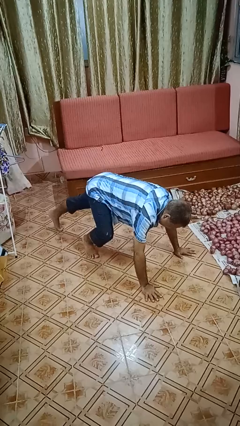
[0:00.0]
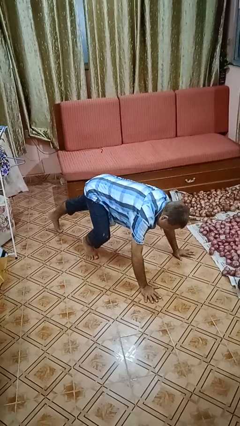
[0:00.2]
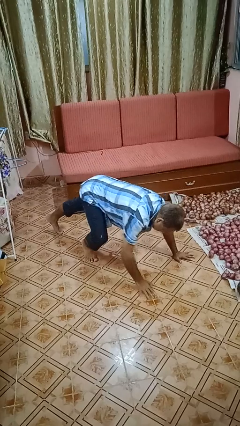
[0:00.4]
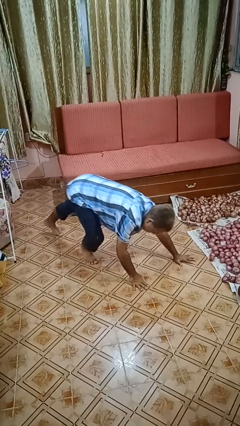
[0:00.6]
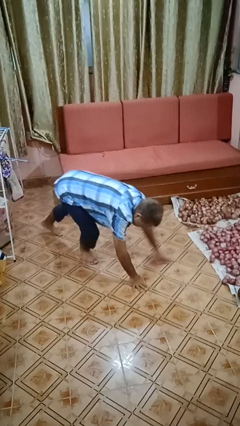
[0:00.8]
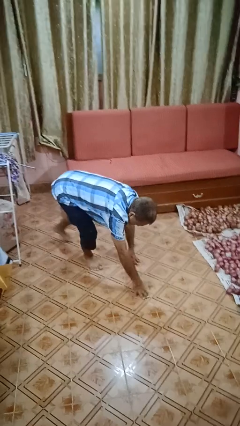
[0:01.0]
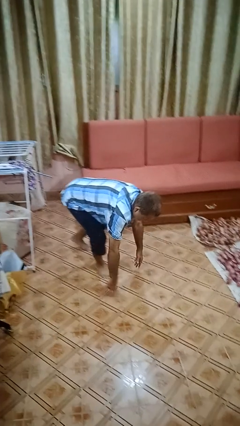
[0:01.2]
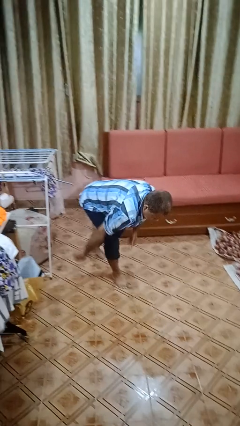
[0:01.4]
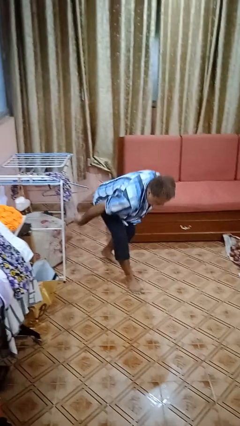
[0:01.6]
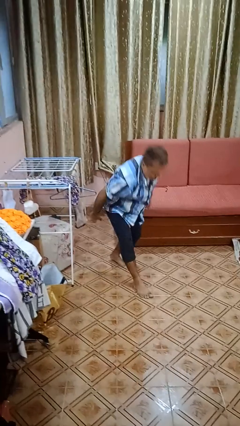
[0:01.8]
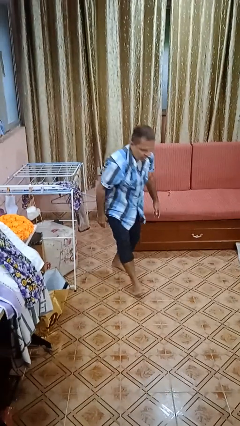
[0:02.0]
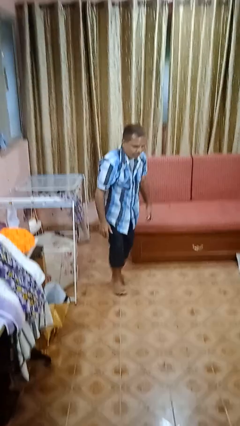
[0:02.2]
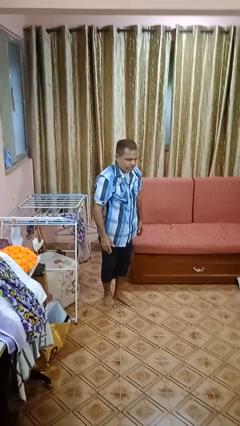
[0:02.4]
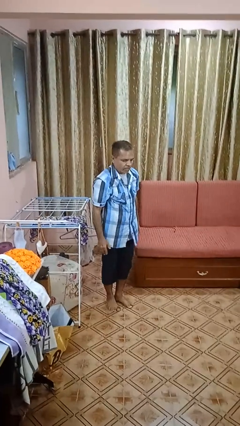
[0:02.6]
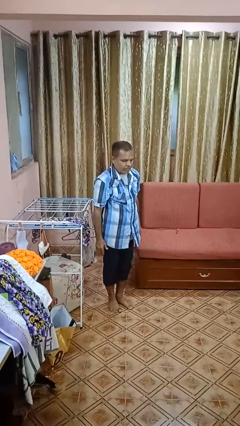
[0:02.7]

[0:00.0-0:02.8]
person stands up from floor

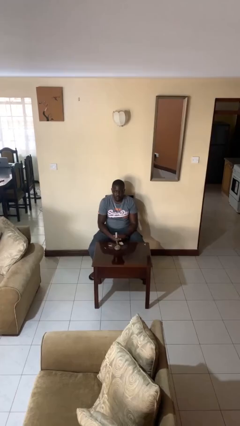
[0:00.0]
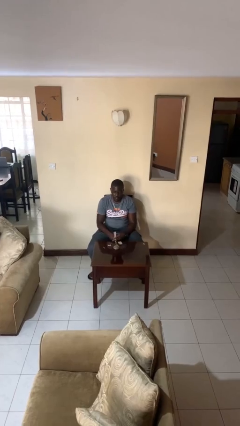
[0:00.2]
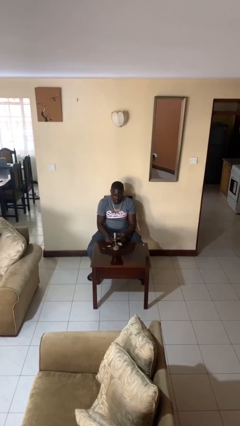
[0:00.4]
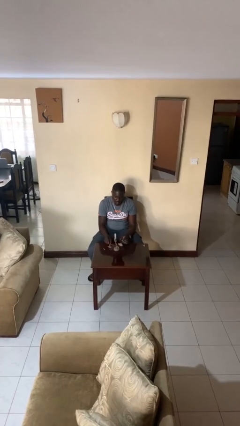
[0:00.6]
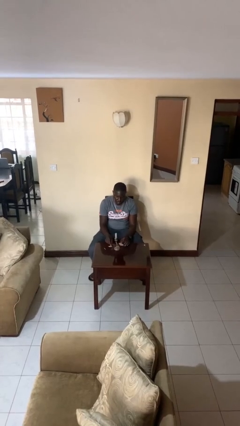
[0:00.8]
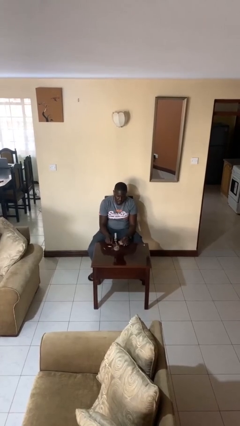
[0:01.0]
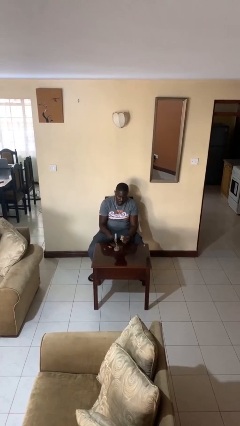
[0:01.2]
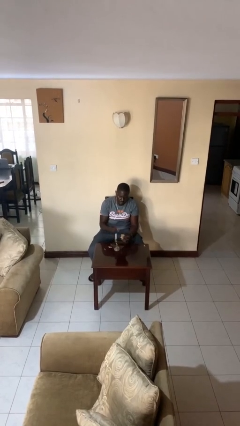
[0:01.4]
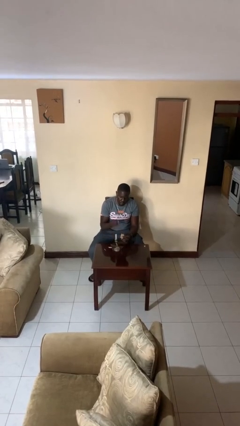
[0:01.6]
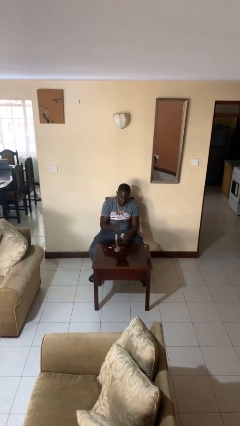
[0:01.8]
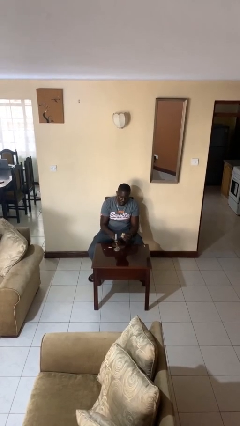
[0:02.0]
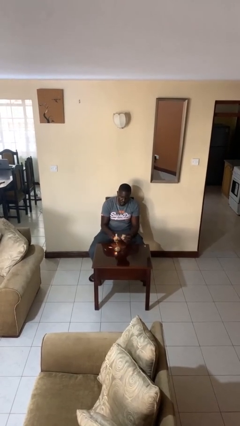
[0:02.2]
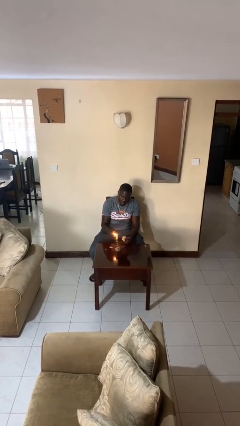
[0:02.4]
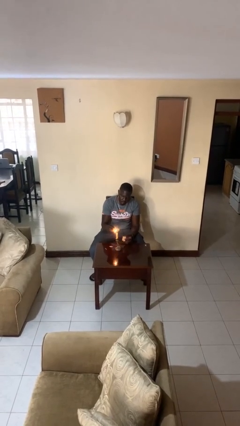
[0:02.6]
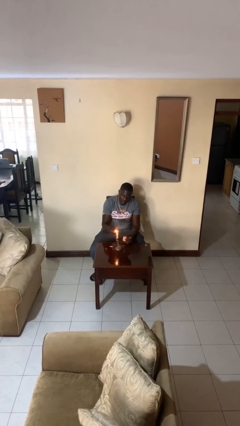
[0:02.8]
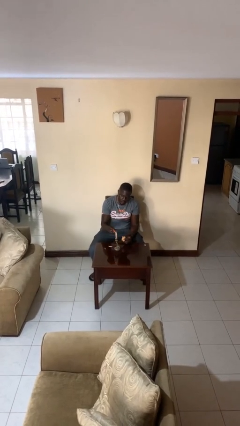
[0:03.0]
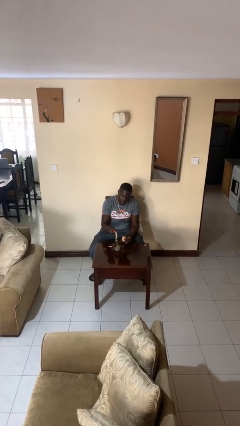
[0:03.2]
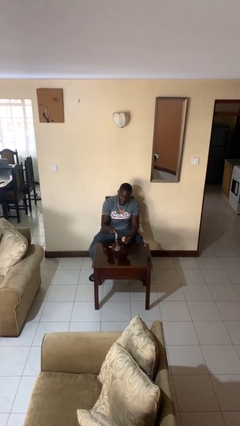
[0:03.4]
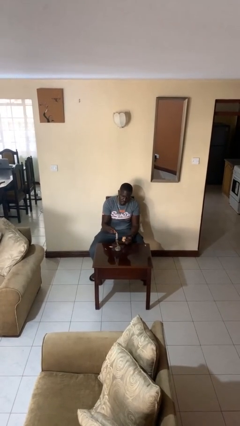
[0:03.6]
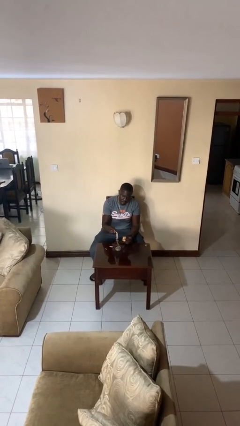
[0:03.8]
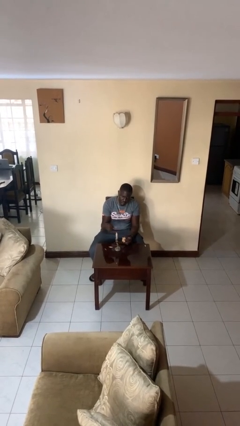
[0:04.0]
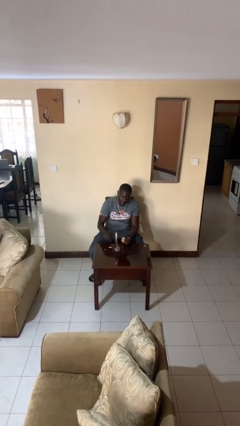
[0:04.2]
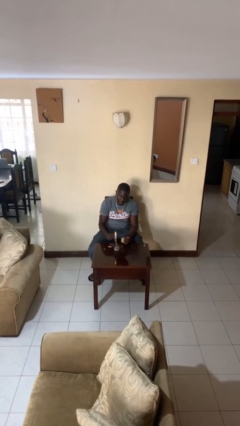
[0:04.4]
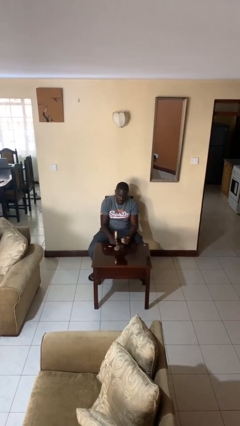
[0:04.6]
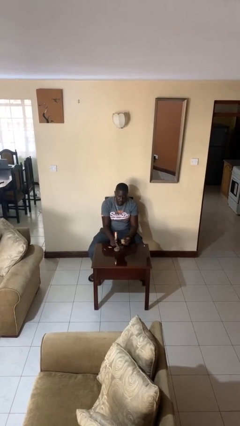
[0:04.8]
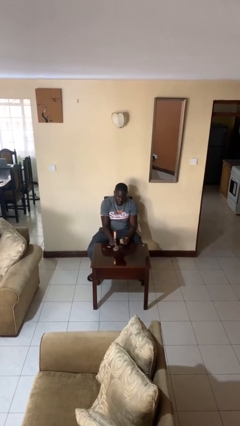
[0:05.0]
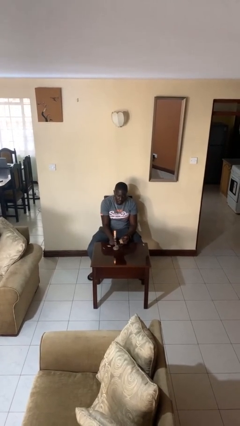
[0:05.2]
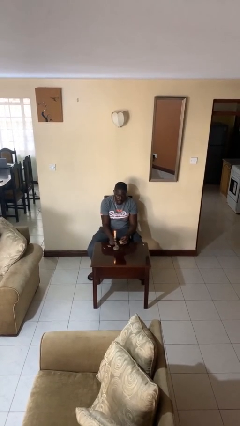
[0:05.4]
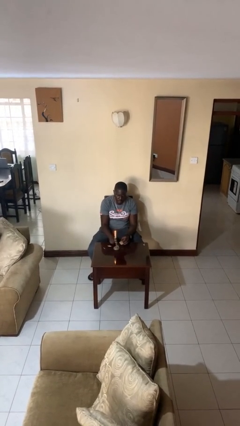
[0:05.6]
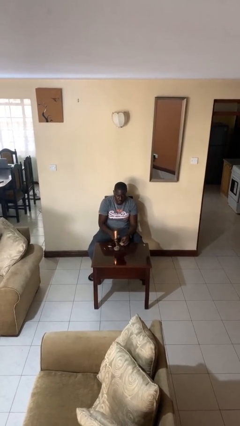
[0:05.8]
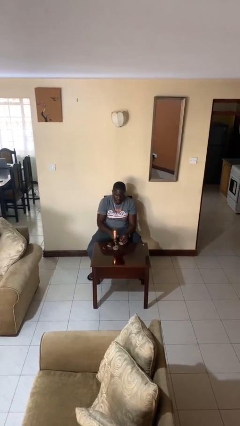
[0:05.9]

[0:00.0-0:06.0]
person lights candle

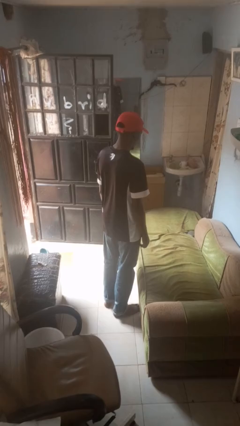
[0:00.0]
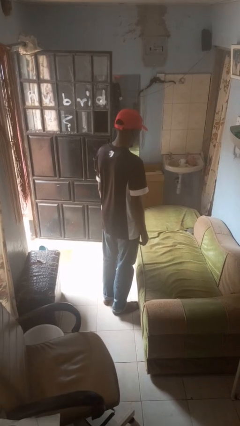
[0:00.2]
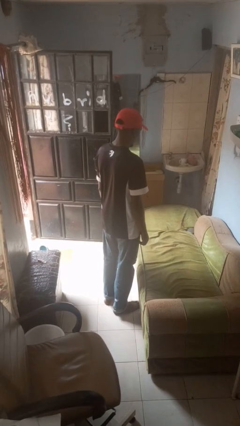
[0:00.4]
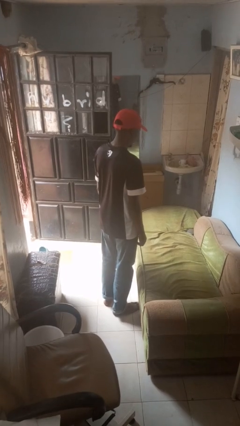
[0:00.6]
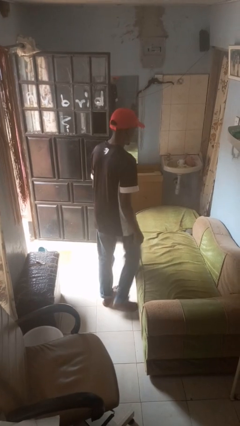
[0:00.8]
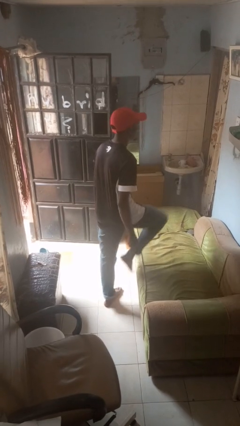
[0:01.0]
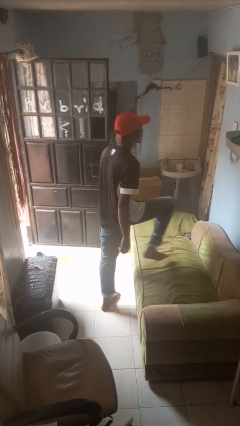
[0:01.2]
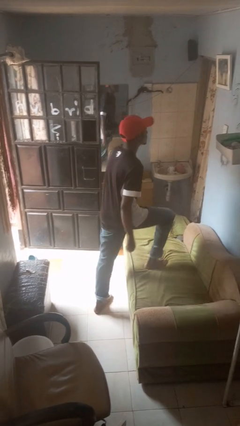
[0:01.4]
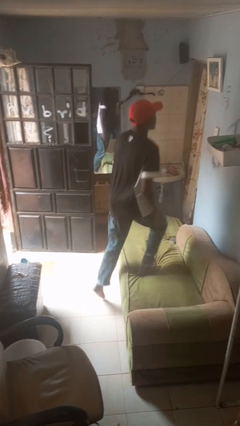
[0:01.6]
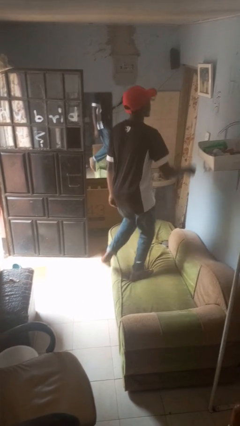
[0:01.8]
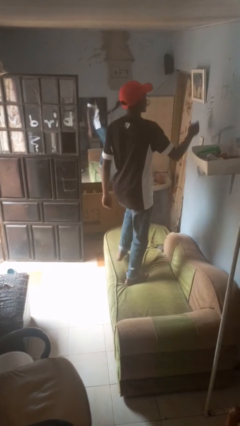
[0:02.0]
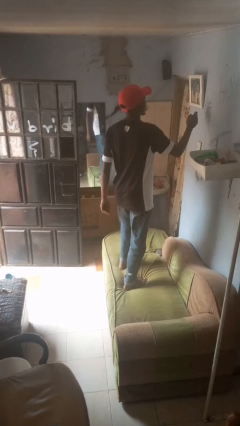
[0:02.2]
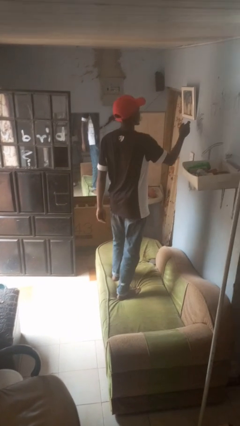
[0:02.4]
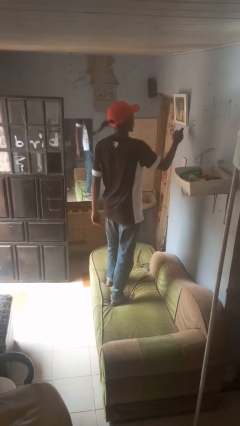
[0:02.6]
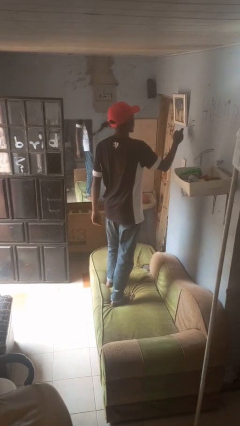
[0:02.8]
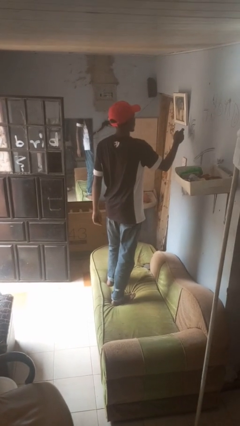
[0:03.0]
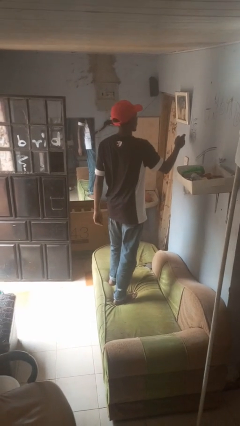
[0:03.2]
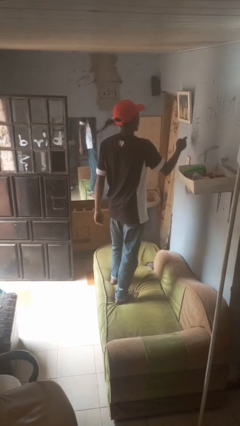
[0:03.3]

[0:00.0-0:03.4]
person climbs on couch

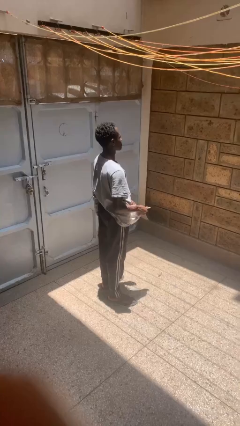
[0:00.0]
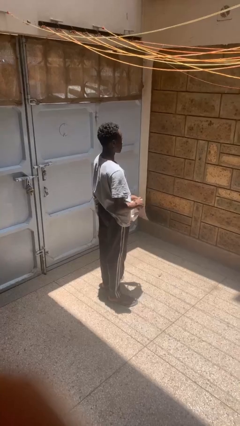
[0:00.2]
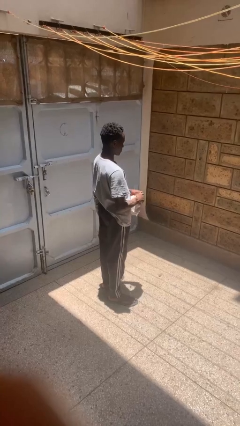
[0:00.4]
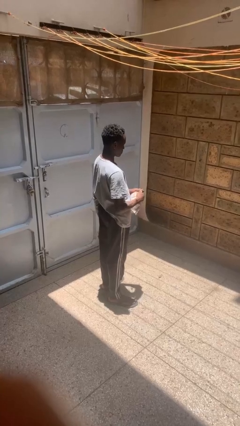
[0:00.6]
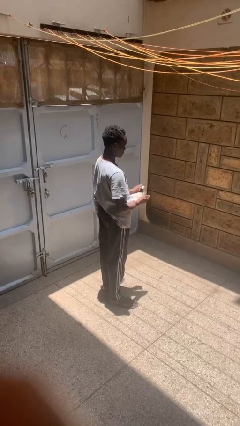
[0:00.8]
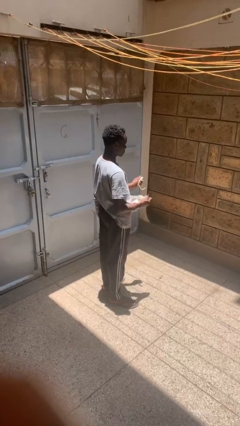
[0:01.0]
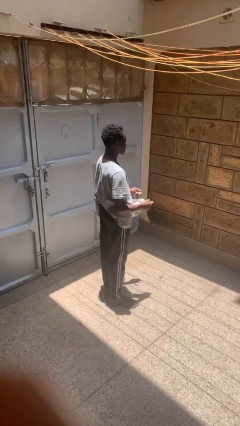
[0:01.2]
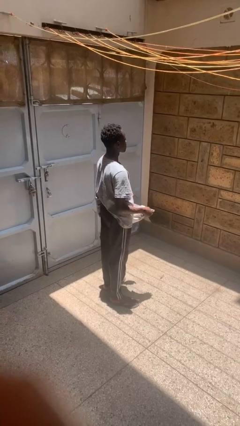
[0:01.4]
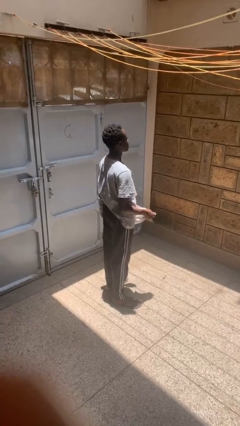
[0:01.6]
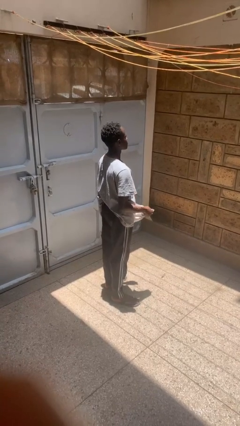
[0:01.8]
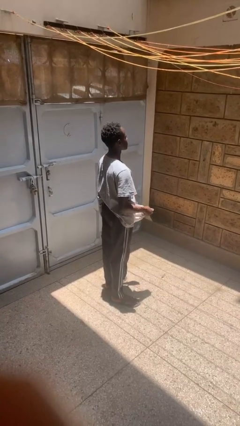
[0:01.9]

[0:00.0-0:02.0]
person tears paper

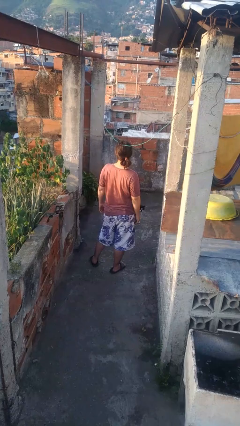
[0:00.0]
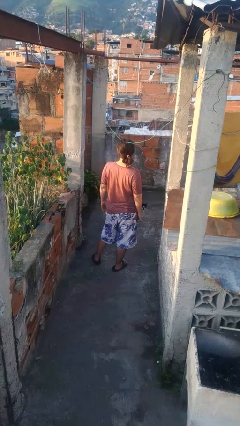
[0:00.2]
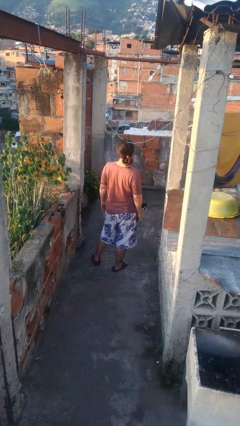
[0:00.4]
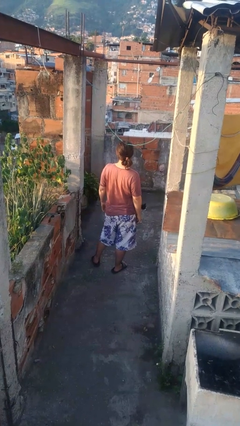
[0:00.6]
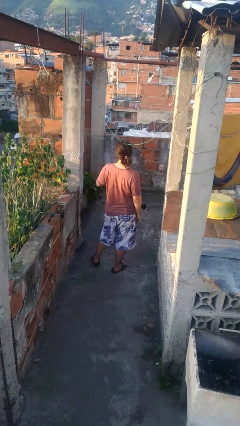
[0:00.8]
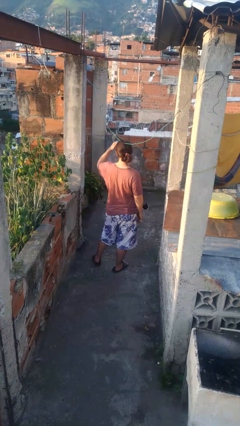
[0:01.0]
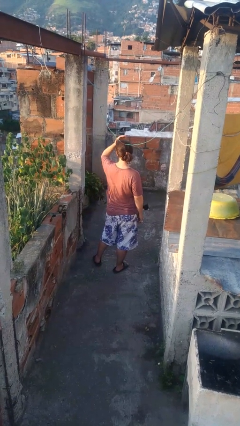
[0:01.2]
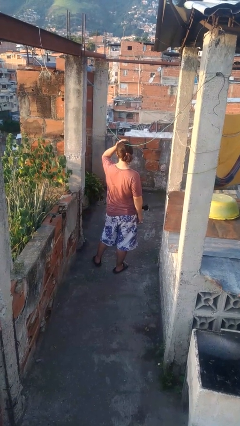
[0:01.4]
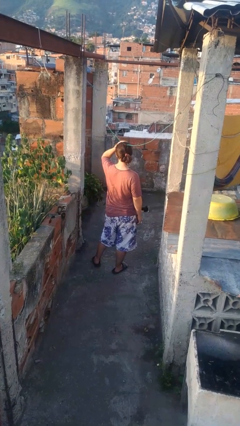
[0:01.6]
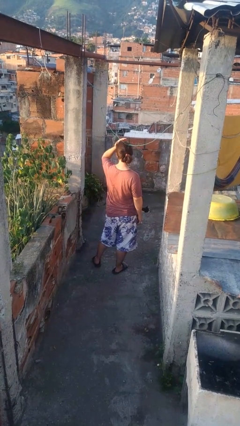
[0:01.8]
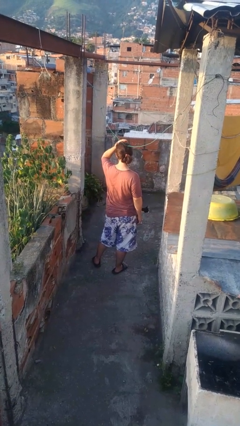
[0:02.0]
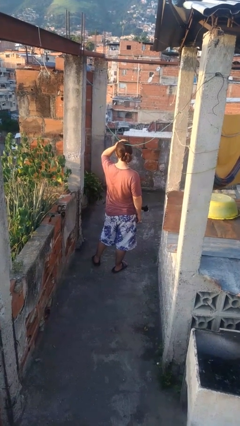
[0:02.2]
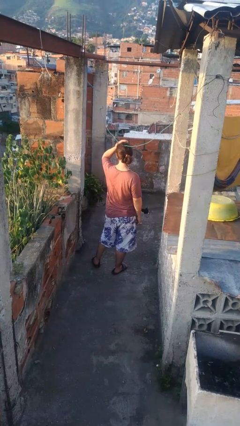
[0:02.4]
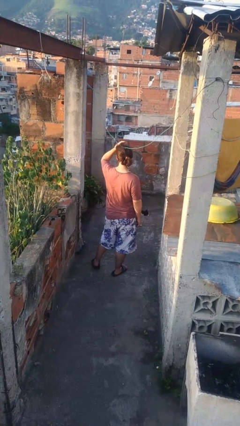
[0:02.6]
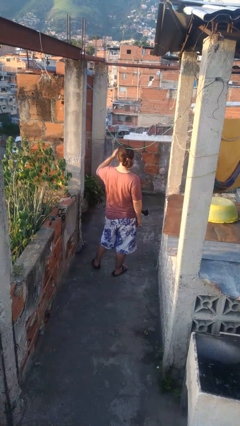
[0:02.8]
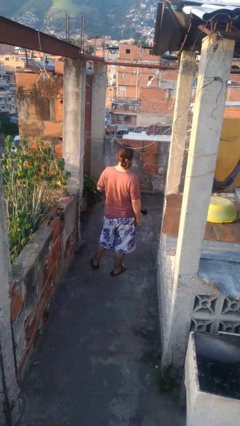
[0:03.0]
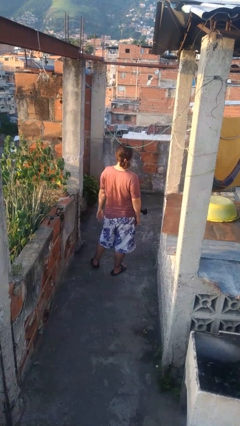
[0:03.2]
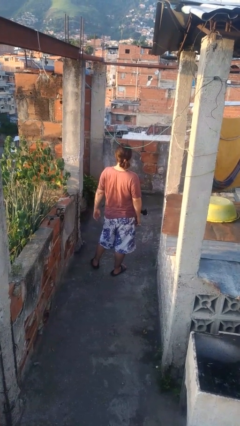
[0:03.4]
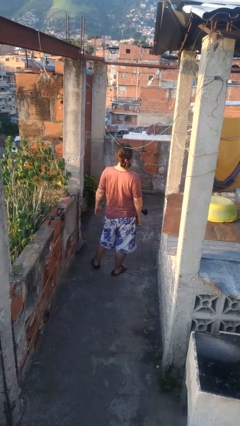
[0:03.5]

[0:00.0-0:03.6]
person pats head
